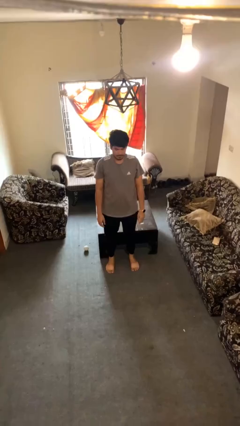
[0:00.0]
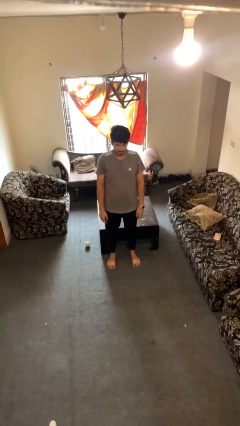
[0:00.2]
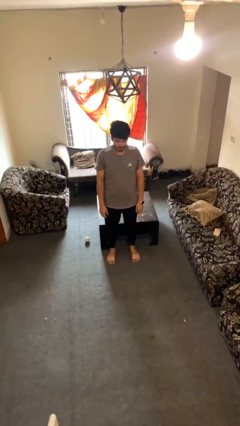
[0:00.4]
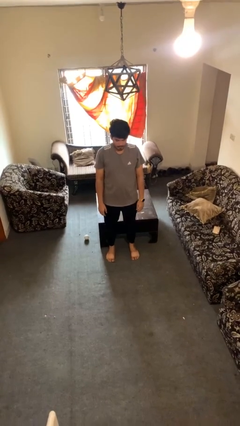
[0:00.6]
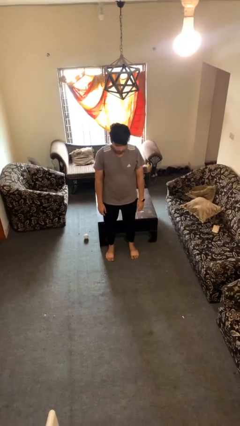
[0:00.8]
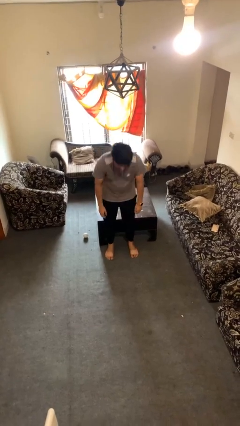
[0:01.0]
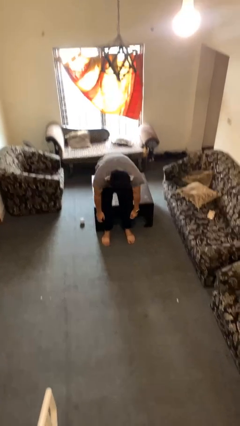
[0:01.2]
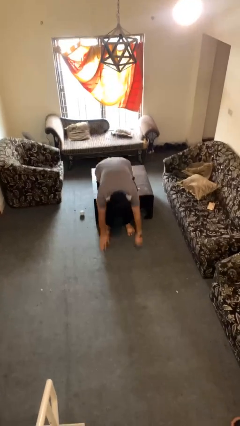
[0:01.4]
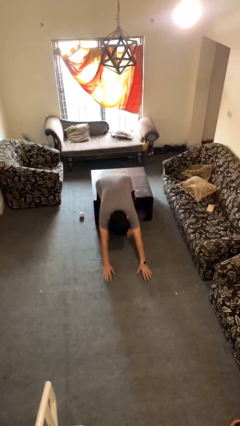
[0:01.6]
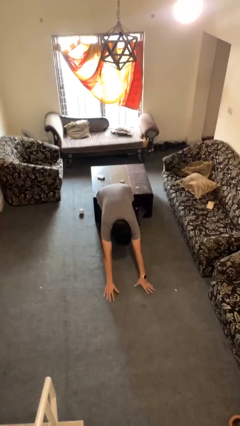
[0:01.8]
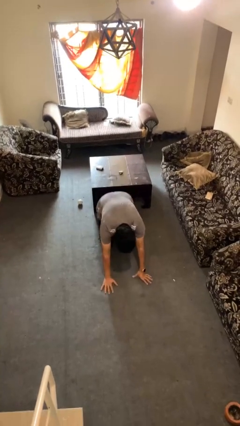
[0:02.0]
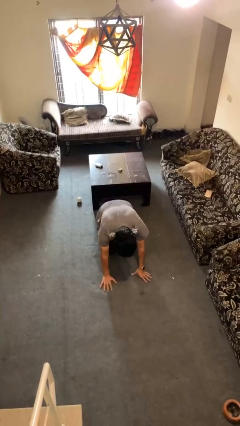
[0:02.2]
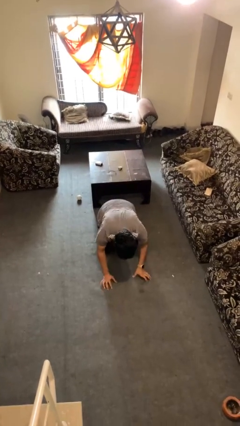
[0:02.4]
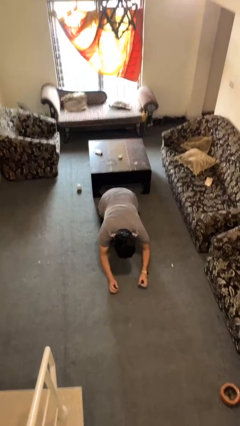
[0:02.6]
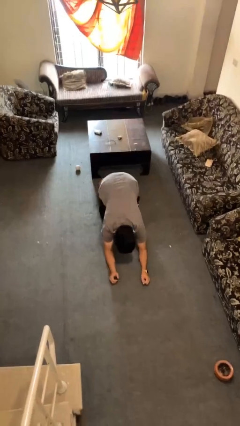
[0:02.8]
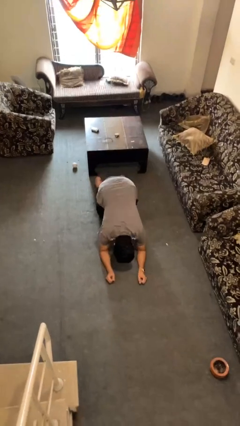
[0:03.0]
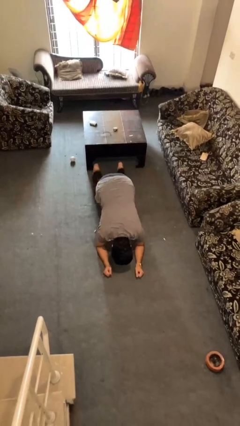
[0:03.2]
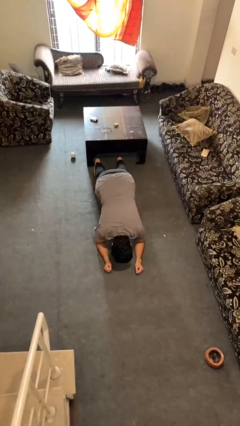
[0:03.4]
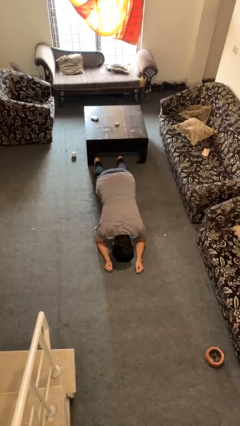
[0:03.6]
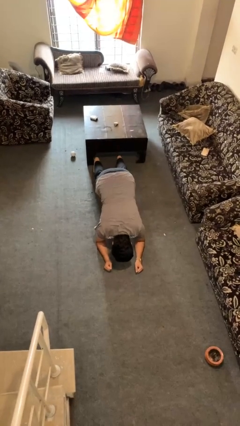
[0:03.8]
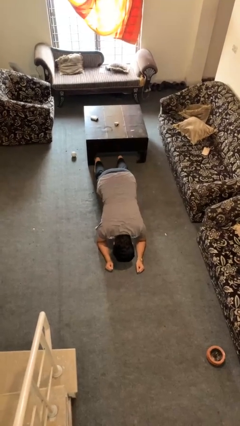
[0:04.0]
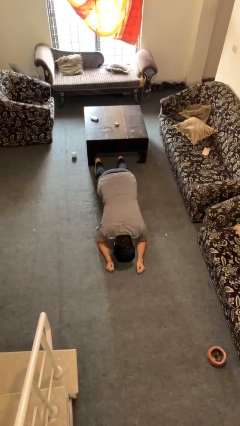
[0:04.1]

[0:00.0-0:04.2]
person exercises with plank

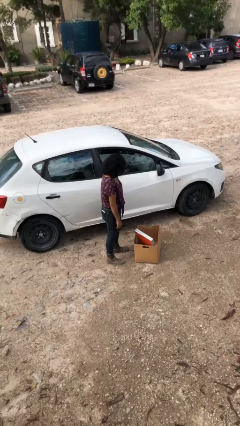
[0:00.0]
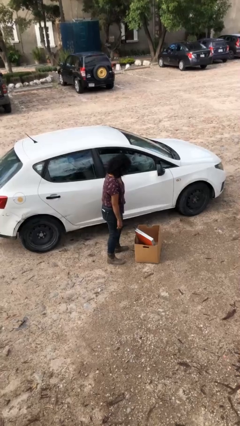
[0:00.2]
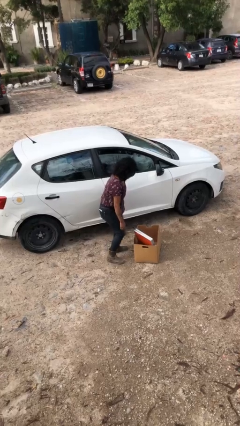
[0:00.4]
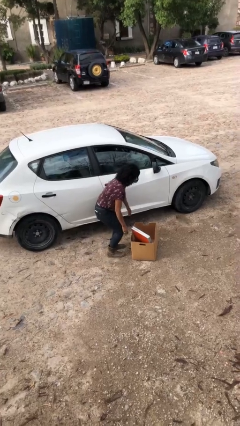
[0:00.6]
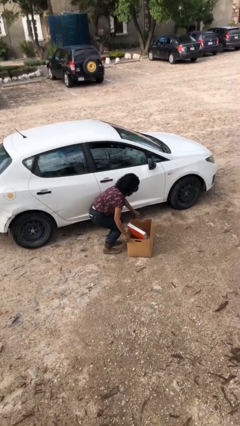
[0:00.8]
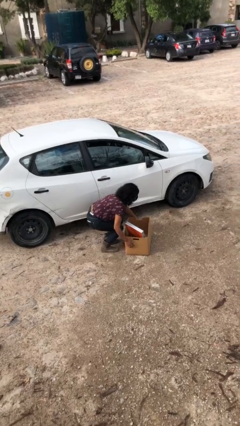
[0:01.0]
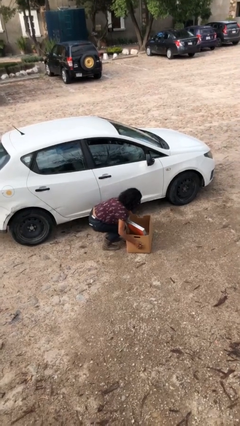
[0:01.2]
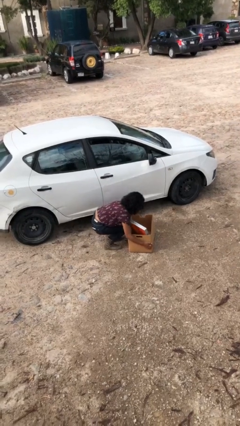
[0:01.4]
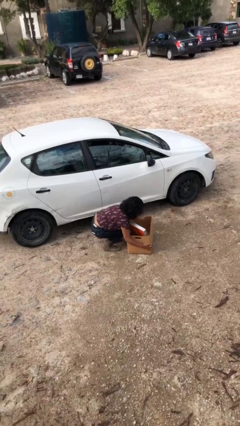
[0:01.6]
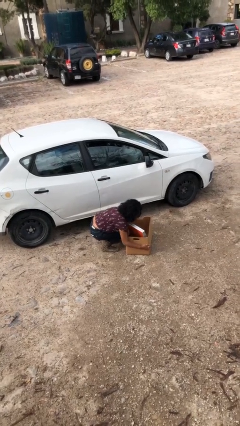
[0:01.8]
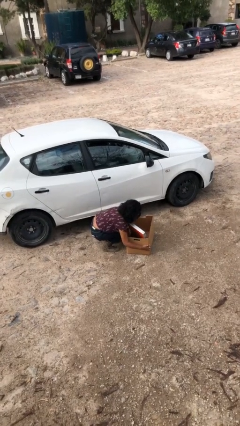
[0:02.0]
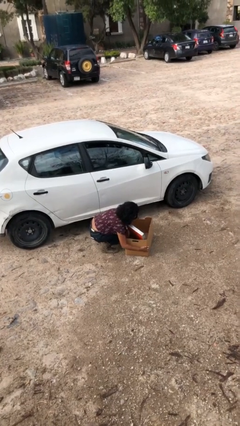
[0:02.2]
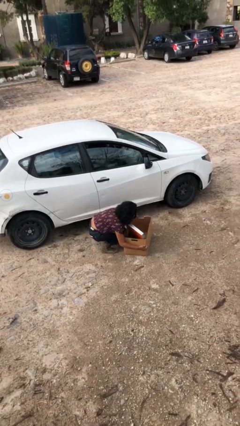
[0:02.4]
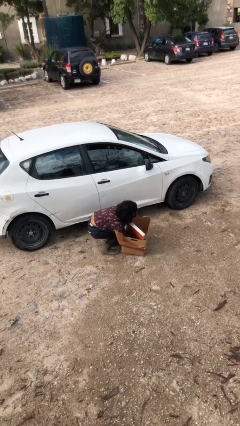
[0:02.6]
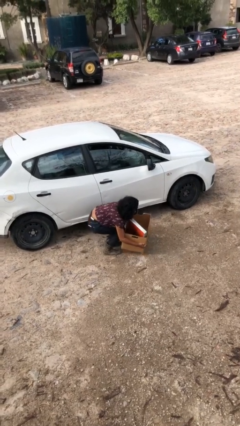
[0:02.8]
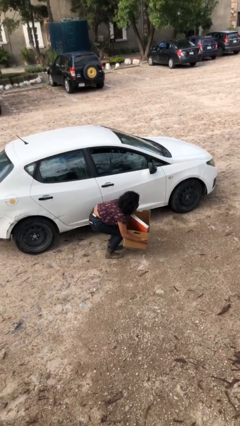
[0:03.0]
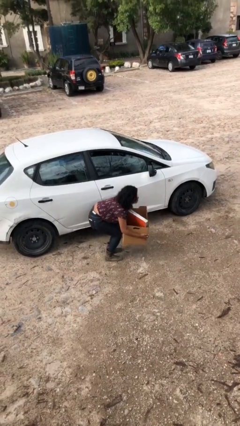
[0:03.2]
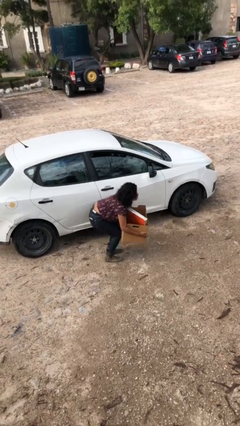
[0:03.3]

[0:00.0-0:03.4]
person picks up object from floor

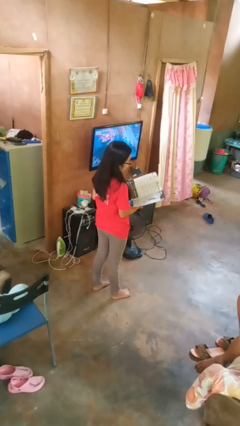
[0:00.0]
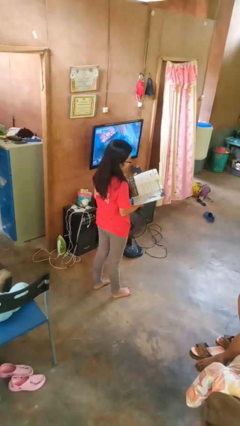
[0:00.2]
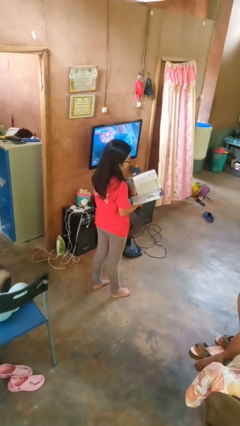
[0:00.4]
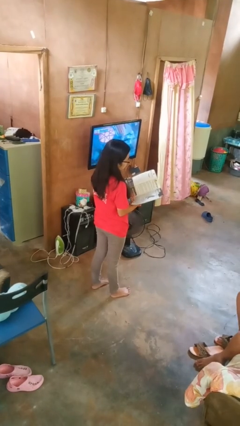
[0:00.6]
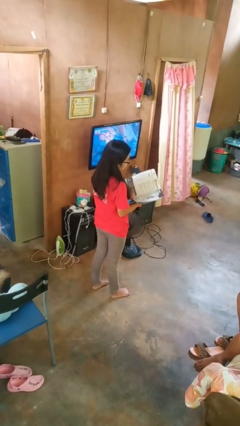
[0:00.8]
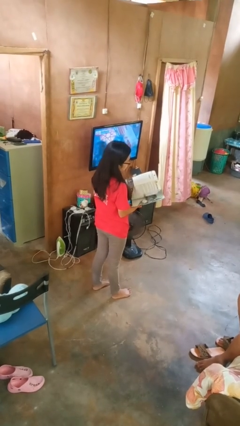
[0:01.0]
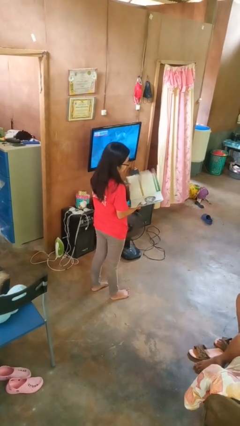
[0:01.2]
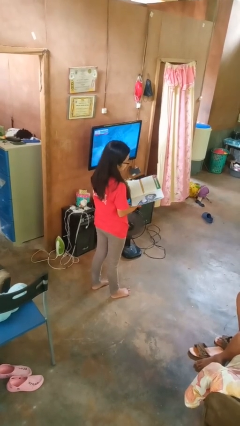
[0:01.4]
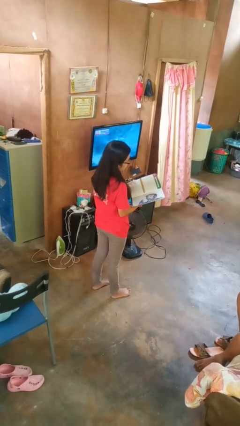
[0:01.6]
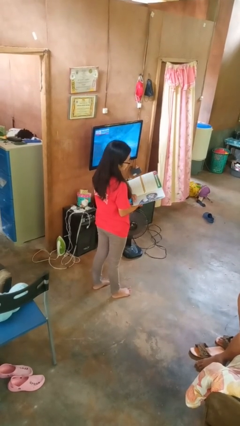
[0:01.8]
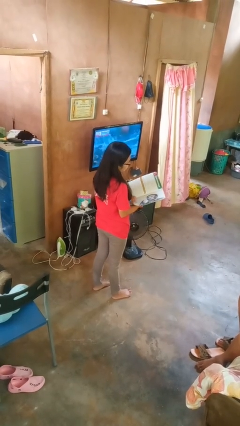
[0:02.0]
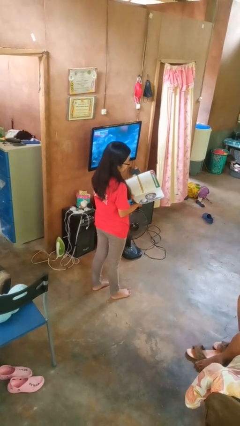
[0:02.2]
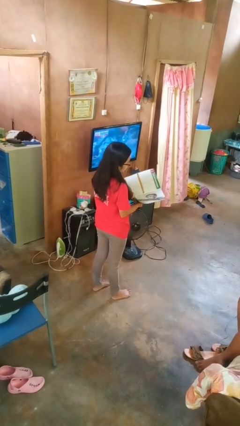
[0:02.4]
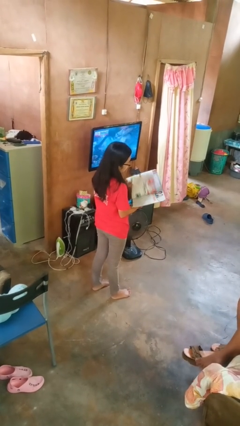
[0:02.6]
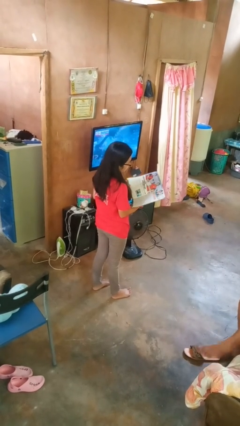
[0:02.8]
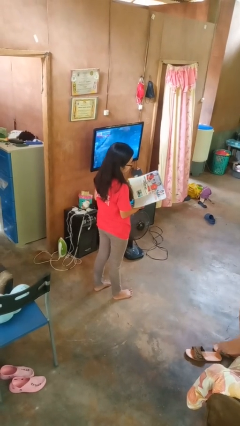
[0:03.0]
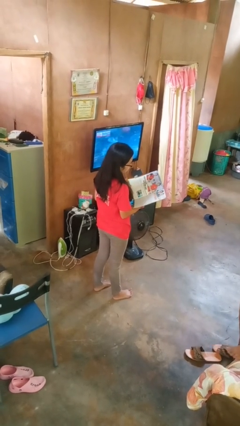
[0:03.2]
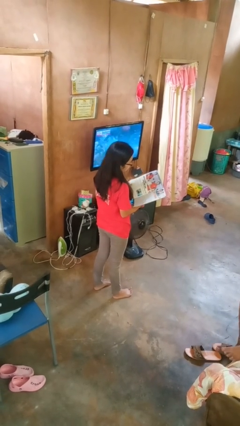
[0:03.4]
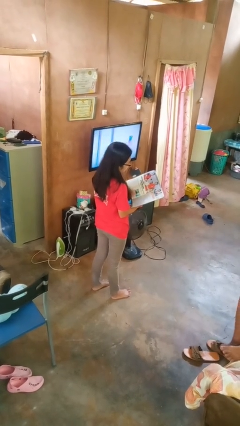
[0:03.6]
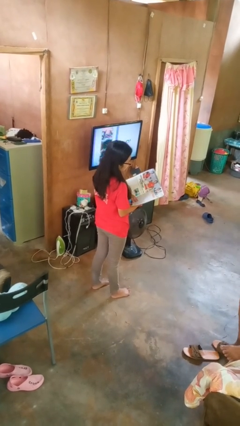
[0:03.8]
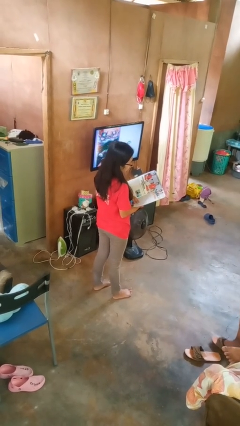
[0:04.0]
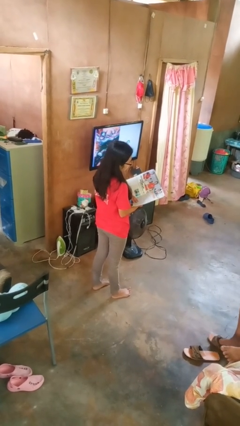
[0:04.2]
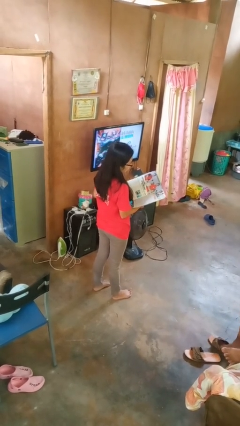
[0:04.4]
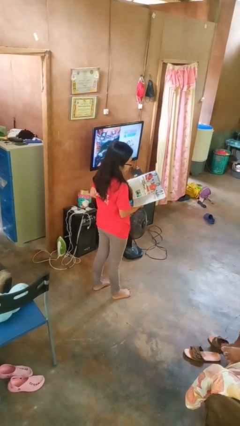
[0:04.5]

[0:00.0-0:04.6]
person reads magazine

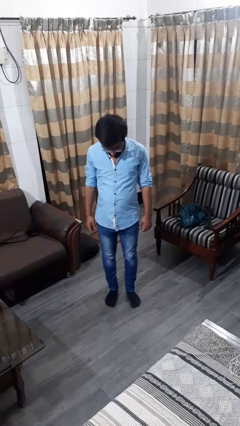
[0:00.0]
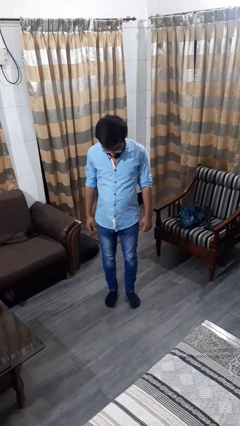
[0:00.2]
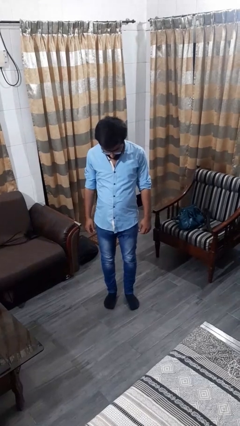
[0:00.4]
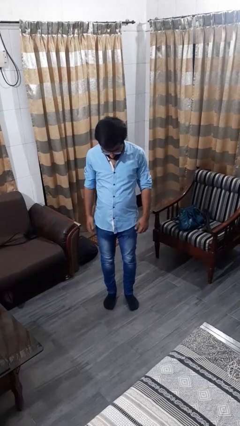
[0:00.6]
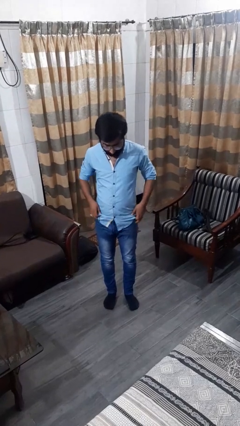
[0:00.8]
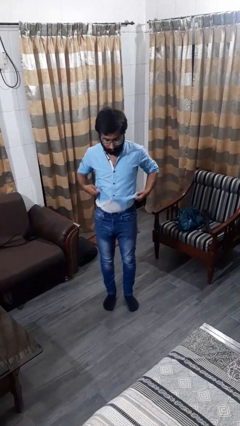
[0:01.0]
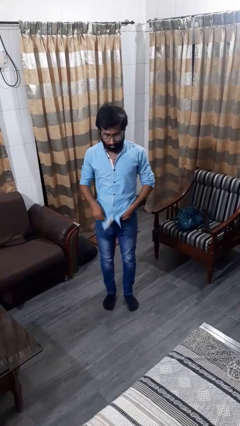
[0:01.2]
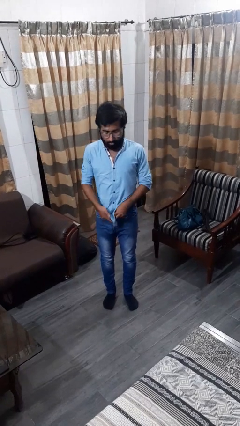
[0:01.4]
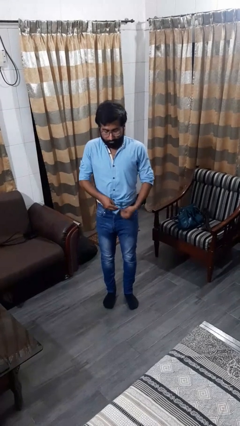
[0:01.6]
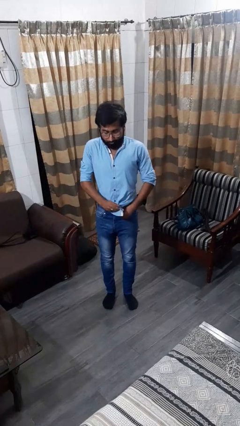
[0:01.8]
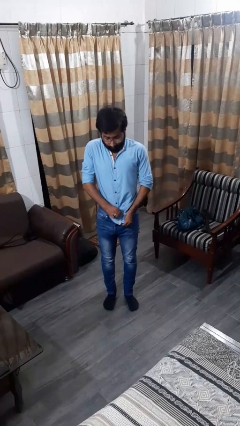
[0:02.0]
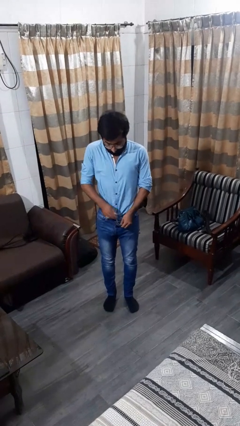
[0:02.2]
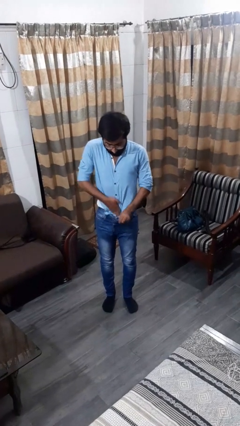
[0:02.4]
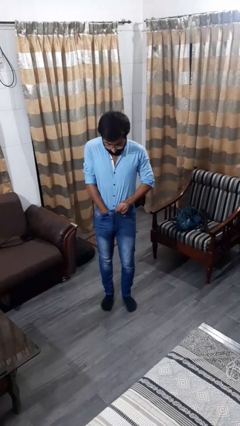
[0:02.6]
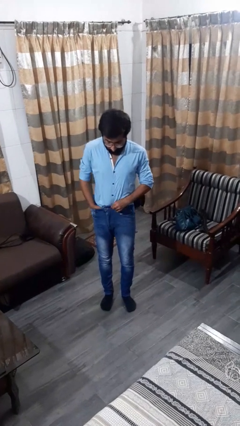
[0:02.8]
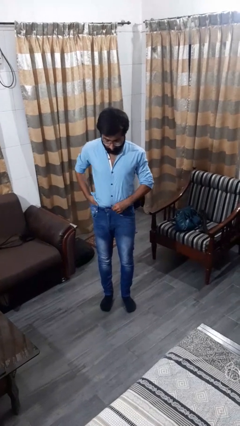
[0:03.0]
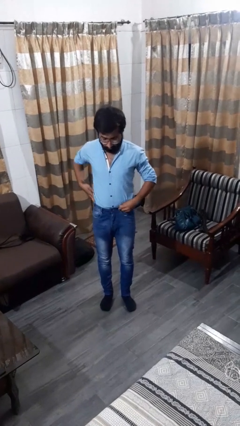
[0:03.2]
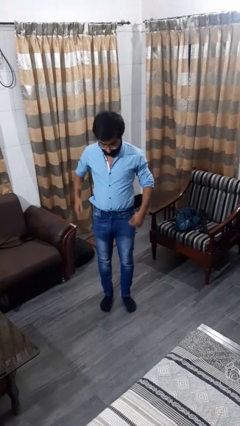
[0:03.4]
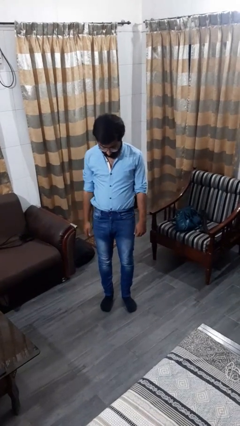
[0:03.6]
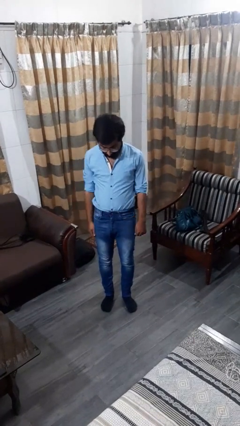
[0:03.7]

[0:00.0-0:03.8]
person tucks in shirt

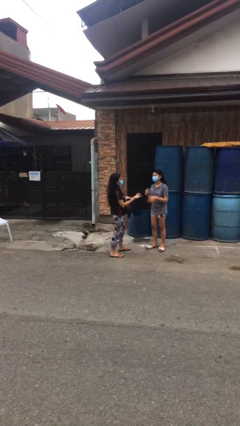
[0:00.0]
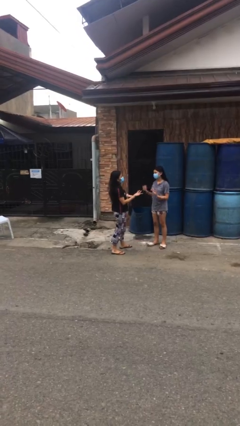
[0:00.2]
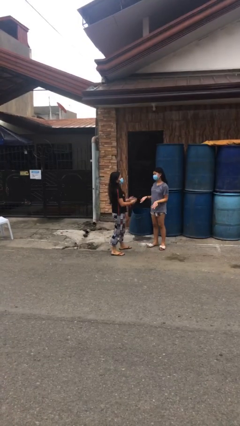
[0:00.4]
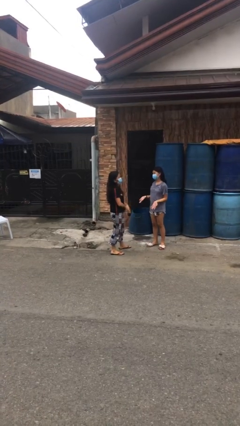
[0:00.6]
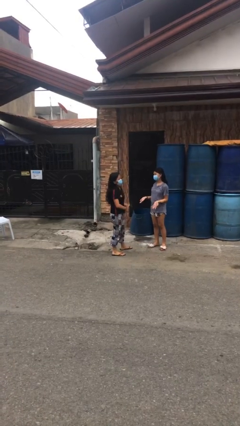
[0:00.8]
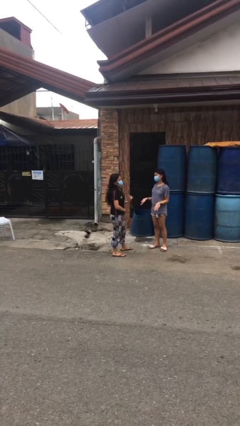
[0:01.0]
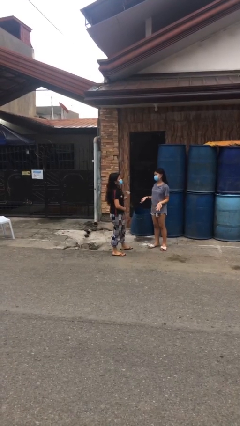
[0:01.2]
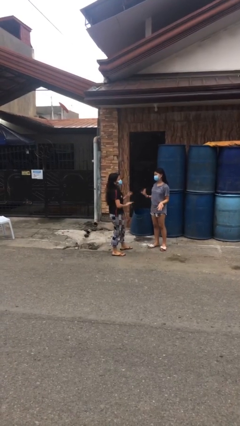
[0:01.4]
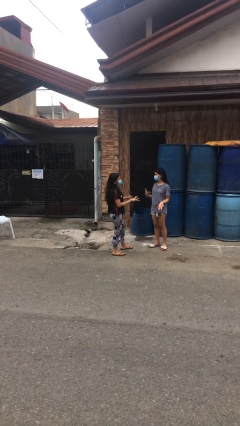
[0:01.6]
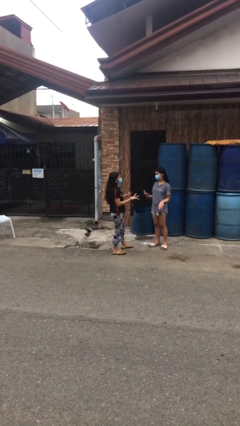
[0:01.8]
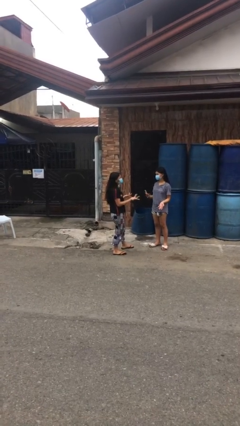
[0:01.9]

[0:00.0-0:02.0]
person talks to person
